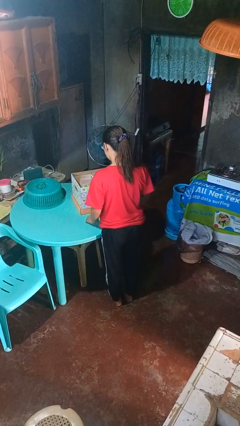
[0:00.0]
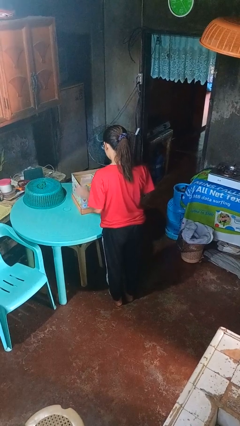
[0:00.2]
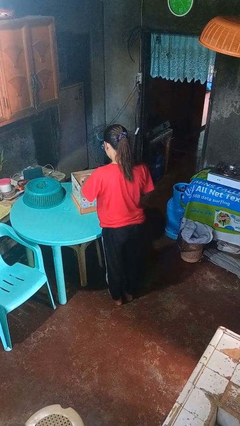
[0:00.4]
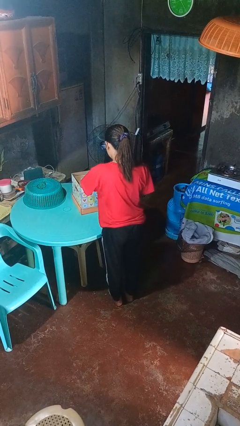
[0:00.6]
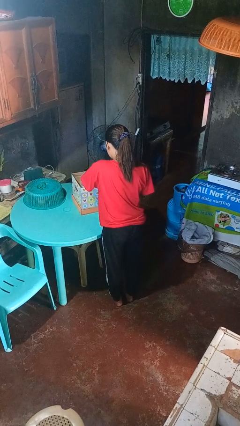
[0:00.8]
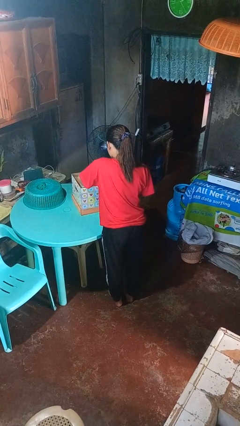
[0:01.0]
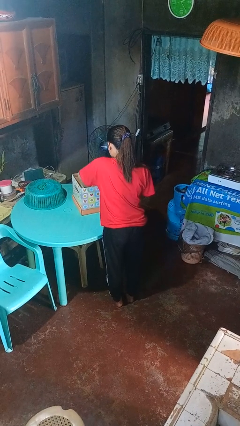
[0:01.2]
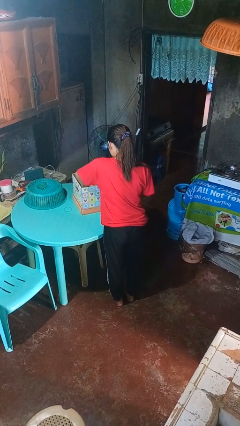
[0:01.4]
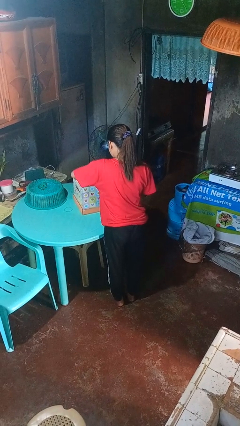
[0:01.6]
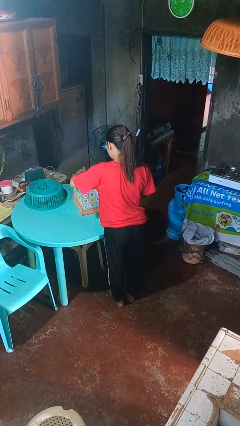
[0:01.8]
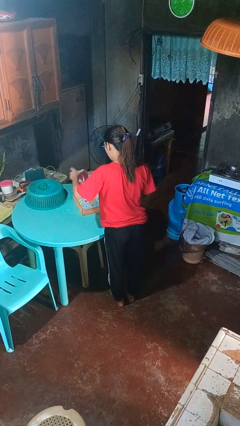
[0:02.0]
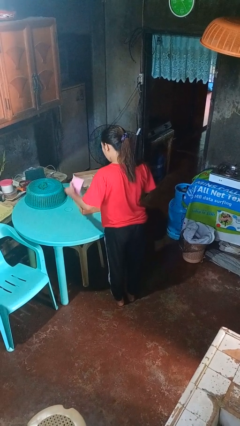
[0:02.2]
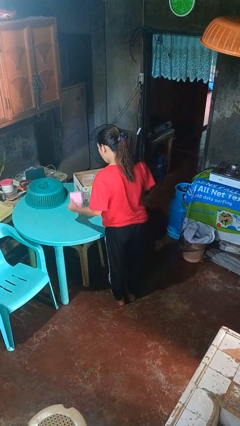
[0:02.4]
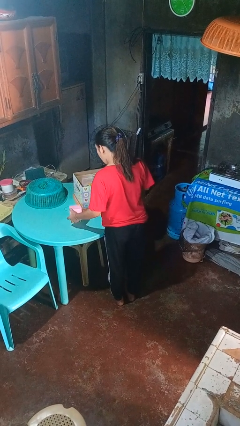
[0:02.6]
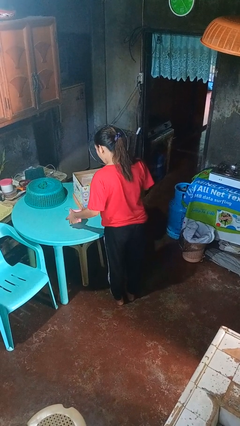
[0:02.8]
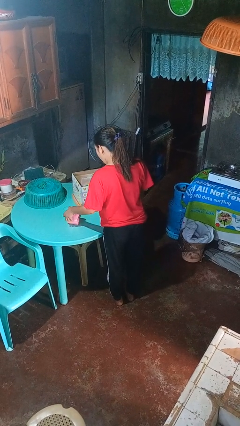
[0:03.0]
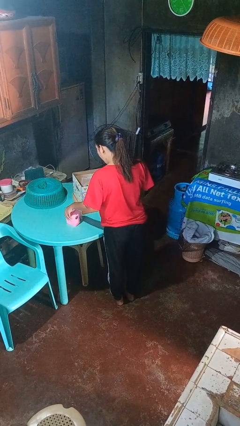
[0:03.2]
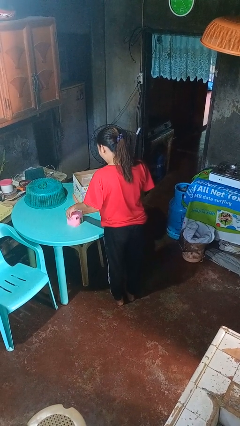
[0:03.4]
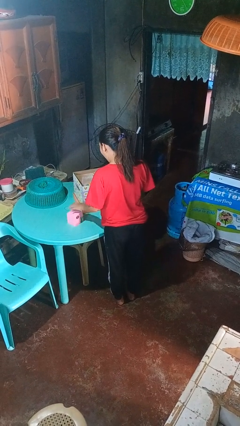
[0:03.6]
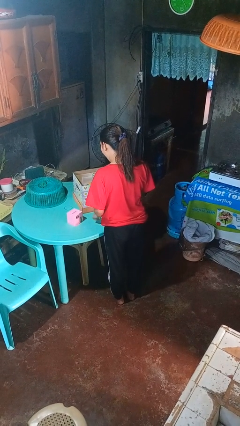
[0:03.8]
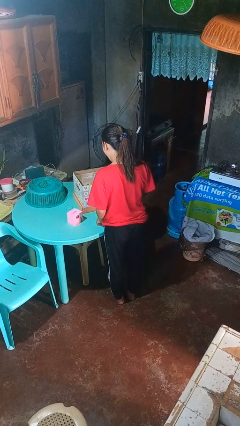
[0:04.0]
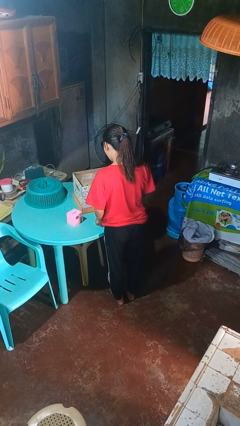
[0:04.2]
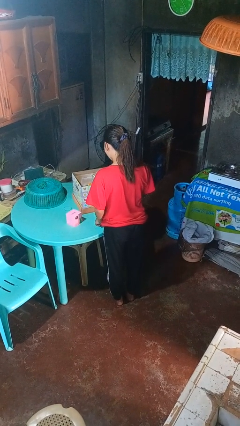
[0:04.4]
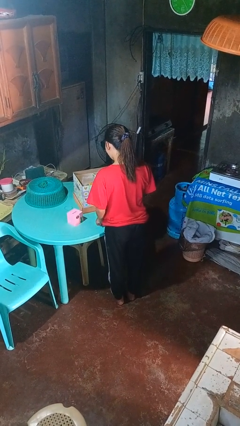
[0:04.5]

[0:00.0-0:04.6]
person takes object from box

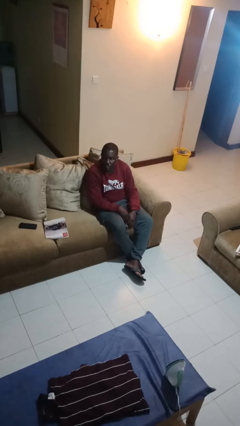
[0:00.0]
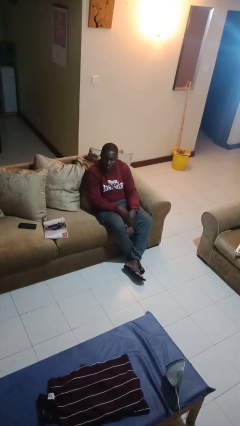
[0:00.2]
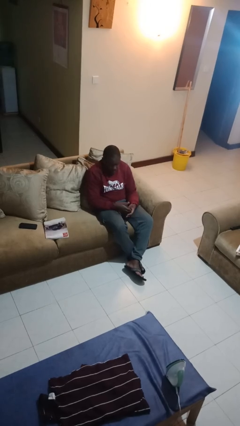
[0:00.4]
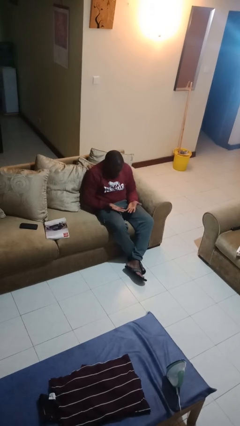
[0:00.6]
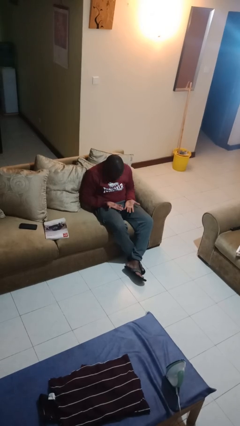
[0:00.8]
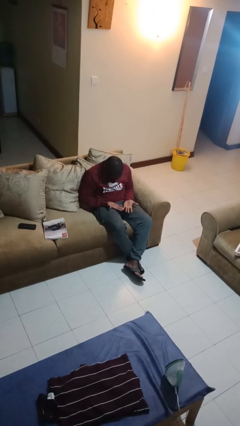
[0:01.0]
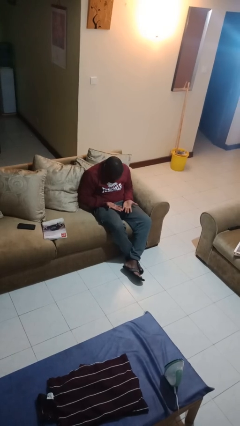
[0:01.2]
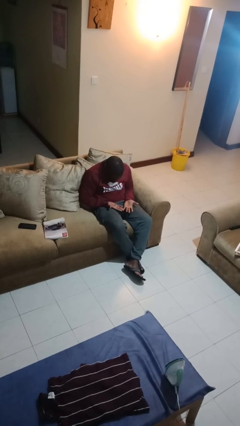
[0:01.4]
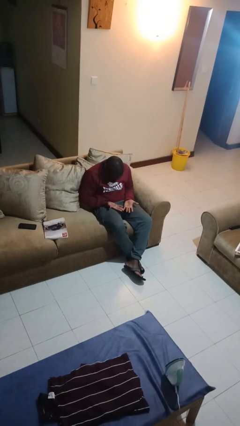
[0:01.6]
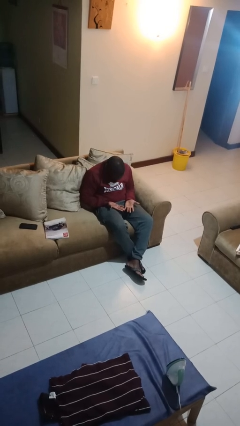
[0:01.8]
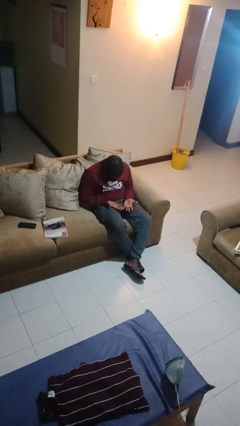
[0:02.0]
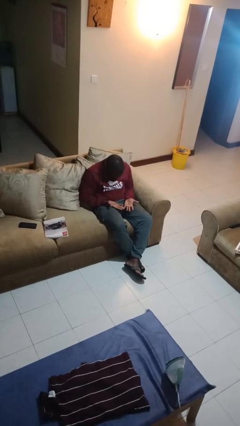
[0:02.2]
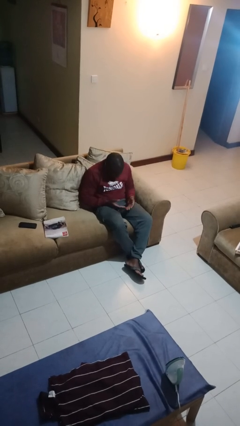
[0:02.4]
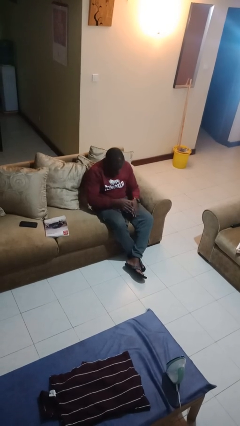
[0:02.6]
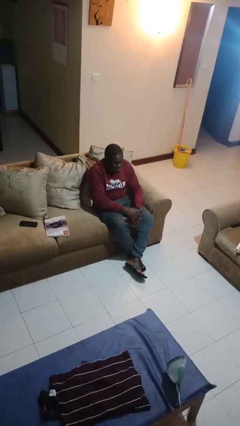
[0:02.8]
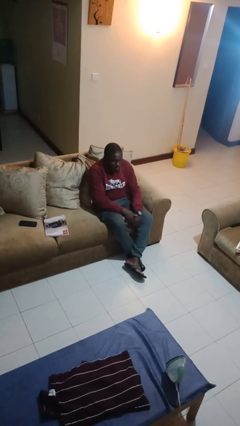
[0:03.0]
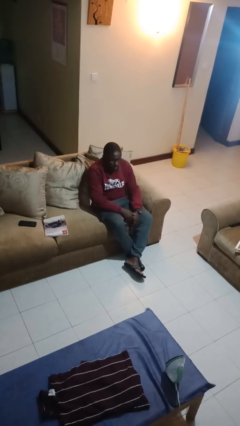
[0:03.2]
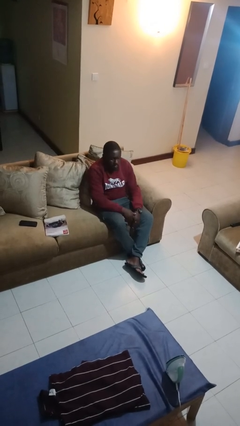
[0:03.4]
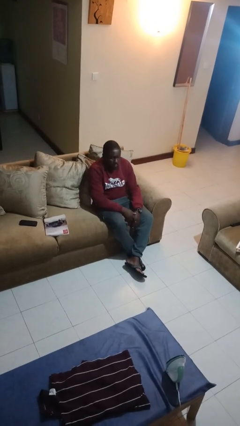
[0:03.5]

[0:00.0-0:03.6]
person looks at hands in lap

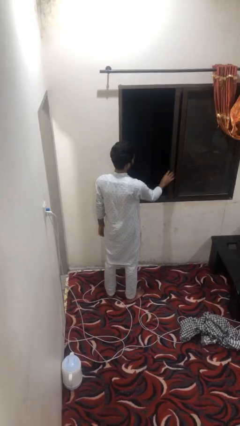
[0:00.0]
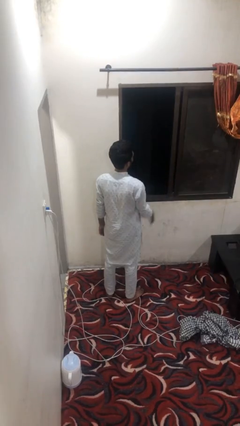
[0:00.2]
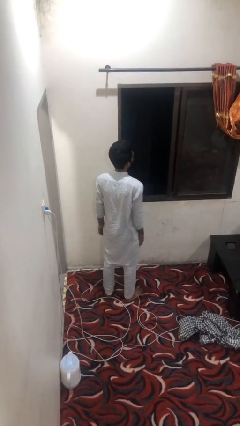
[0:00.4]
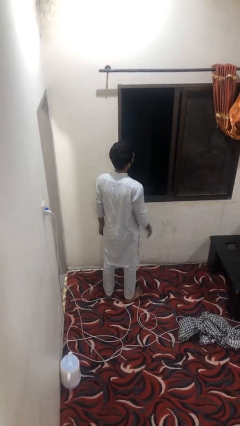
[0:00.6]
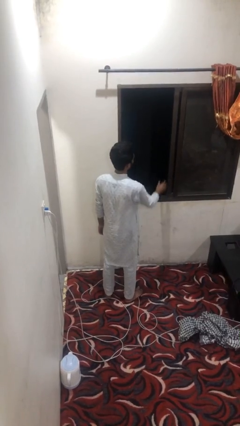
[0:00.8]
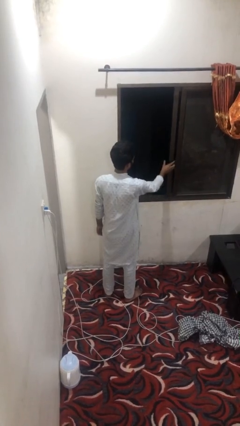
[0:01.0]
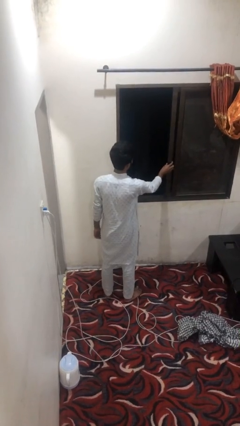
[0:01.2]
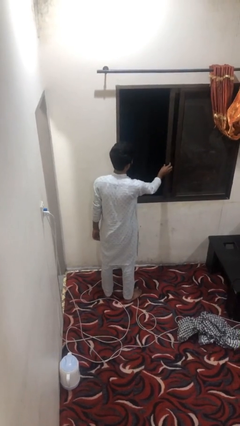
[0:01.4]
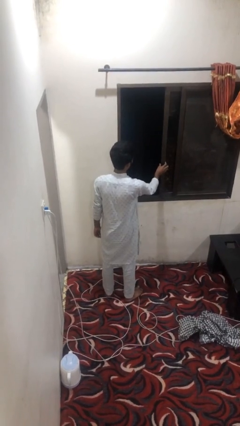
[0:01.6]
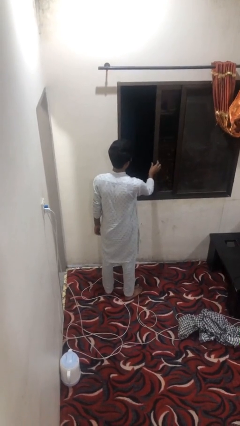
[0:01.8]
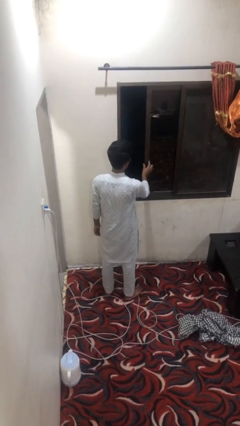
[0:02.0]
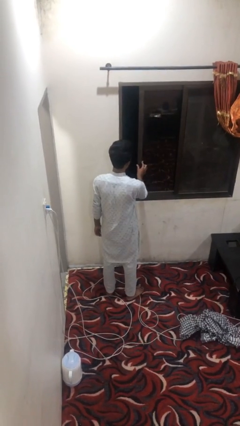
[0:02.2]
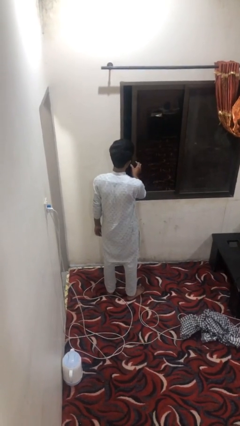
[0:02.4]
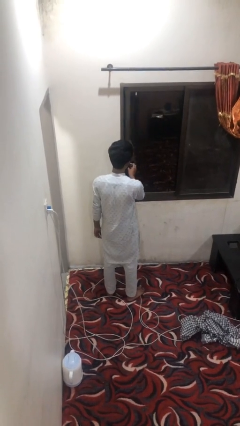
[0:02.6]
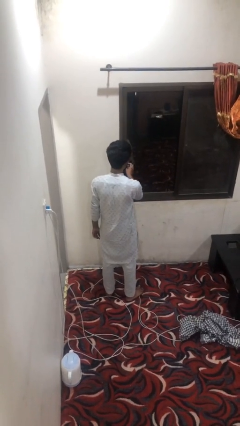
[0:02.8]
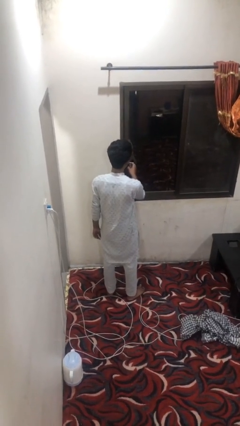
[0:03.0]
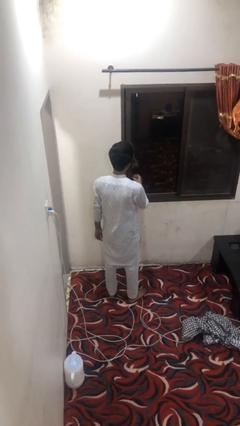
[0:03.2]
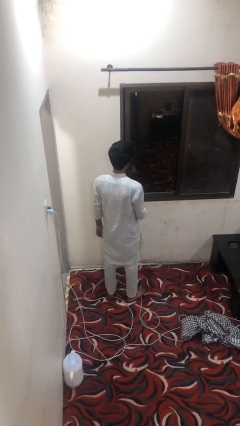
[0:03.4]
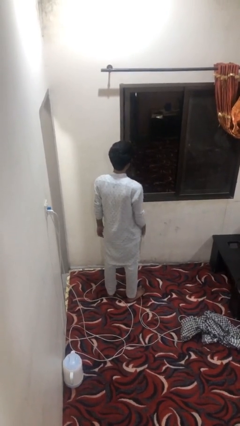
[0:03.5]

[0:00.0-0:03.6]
person closes home window

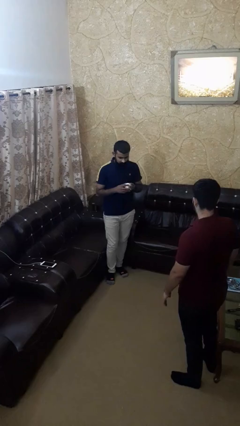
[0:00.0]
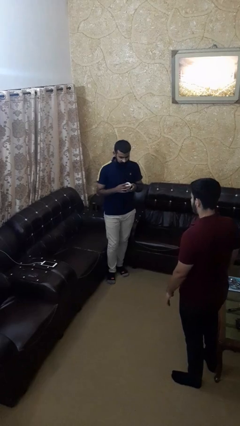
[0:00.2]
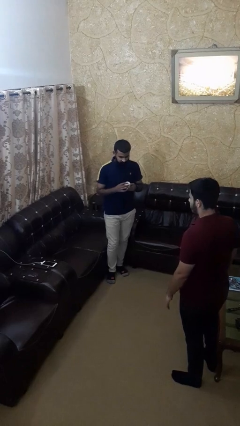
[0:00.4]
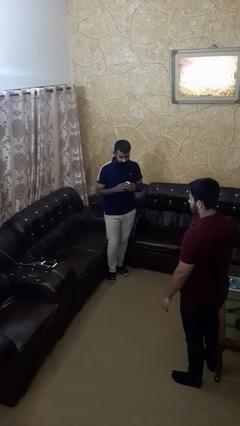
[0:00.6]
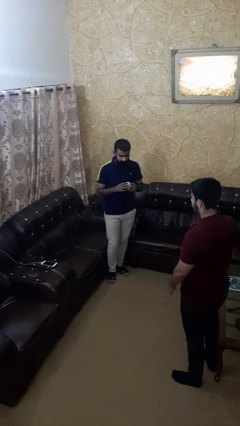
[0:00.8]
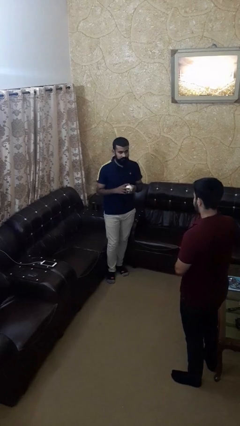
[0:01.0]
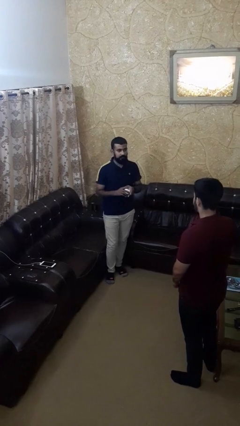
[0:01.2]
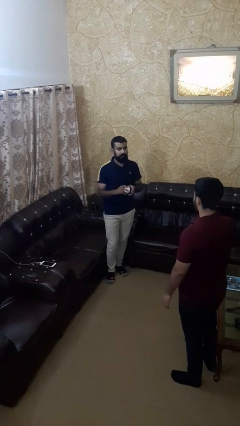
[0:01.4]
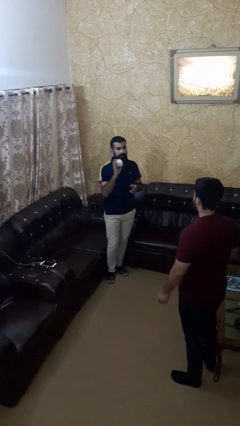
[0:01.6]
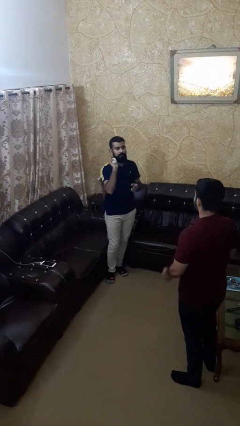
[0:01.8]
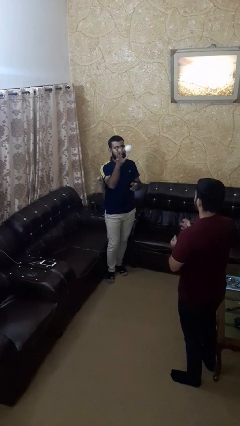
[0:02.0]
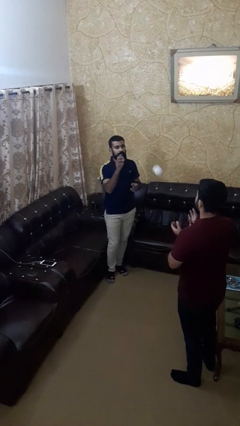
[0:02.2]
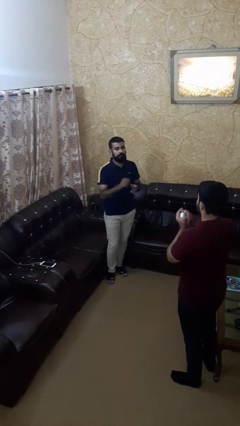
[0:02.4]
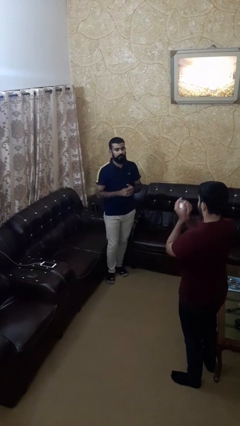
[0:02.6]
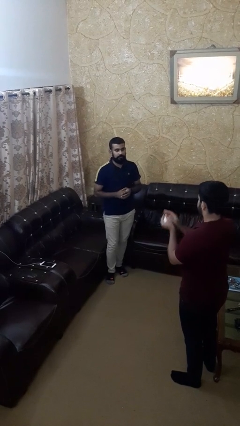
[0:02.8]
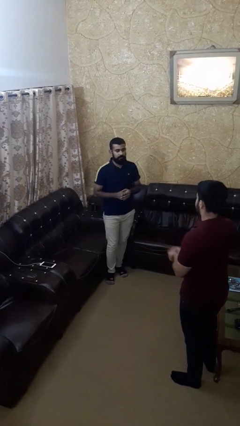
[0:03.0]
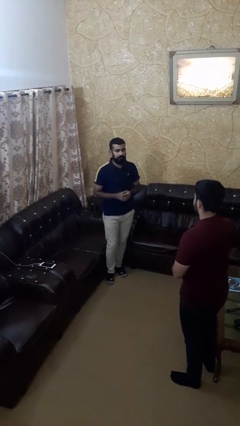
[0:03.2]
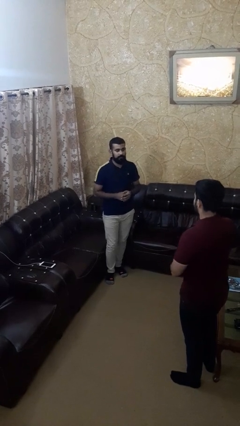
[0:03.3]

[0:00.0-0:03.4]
person throws object to person

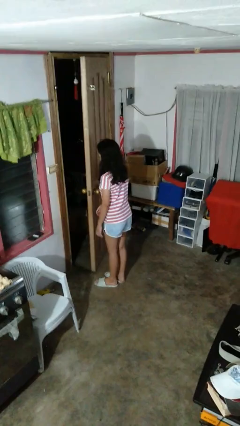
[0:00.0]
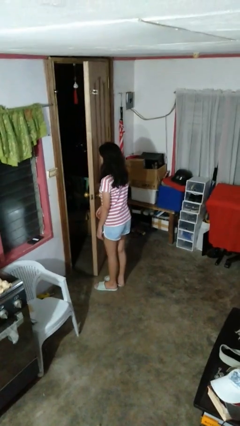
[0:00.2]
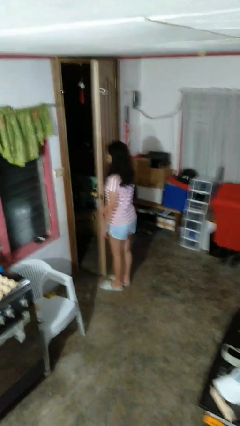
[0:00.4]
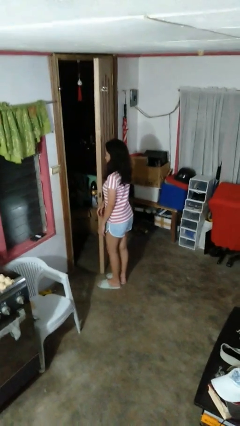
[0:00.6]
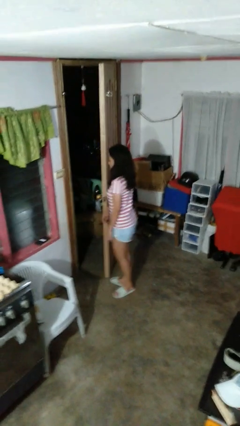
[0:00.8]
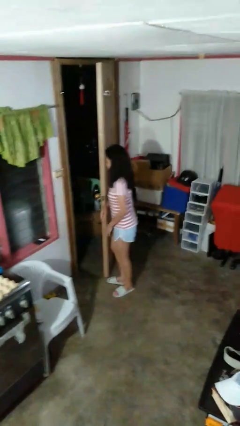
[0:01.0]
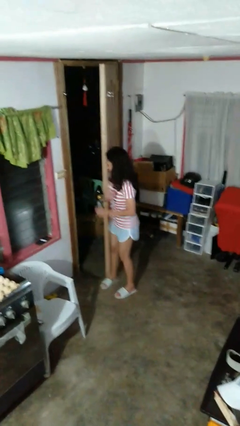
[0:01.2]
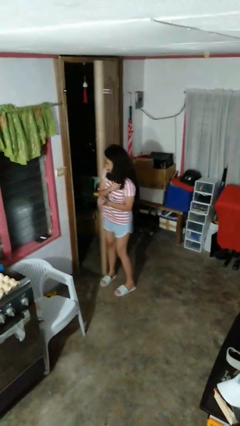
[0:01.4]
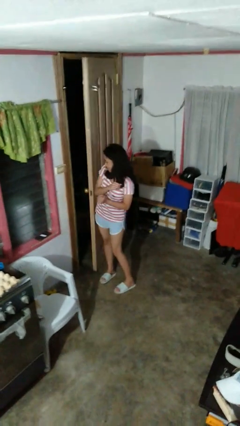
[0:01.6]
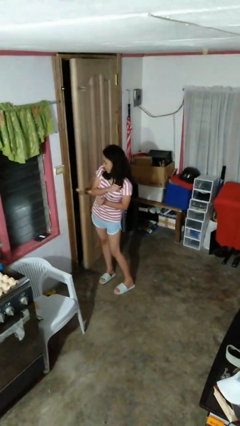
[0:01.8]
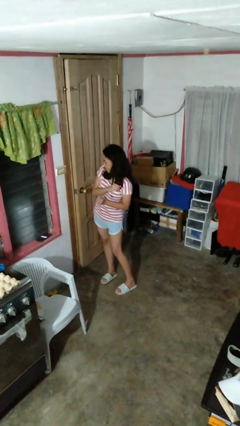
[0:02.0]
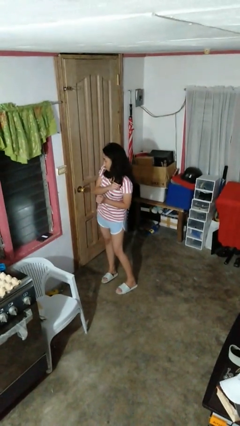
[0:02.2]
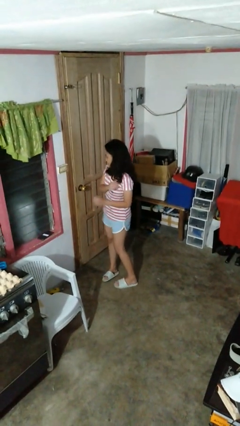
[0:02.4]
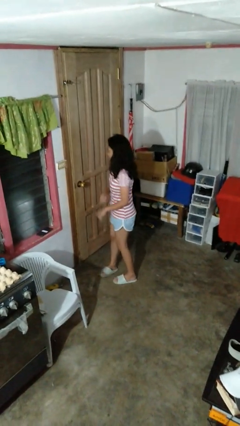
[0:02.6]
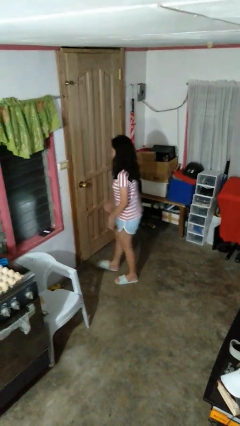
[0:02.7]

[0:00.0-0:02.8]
person closes door with hip
